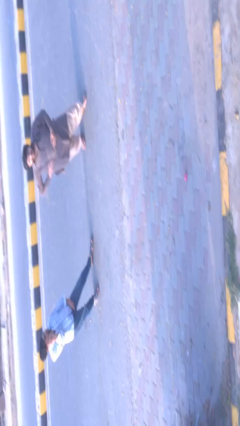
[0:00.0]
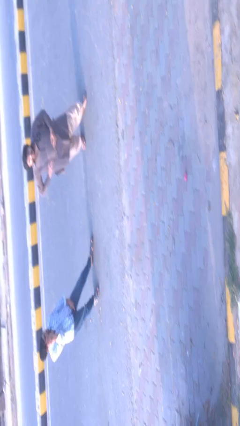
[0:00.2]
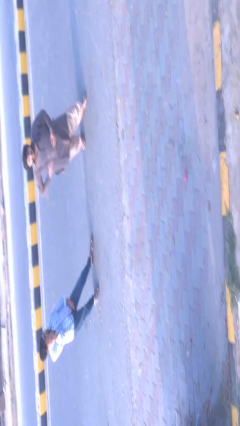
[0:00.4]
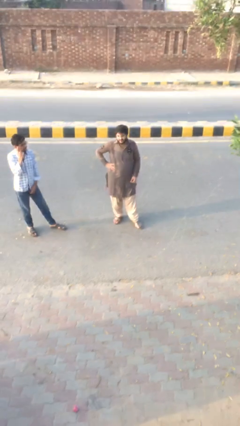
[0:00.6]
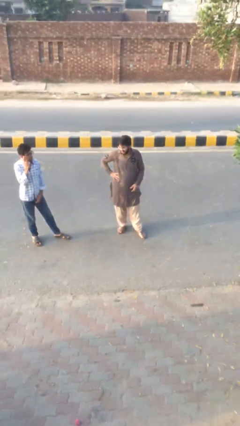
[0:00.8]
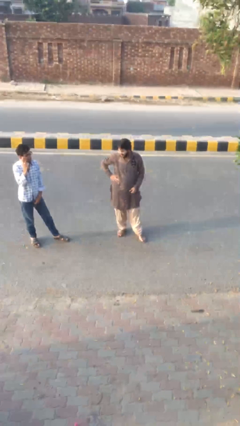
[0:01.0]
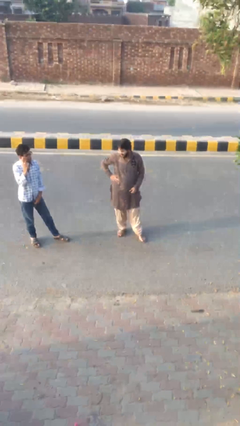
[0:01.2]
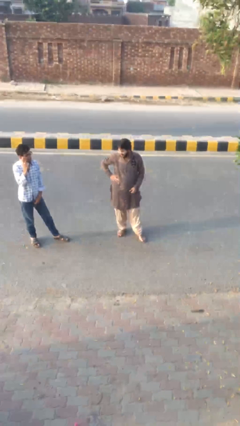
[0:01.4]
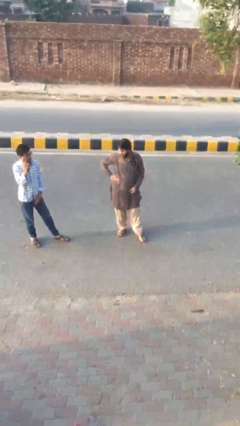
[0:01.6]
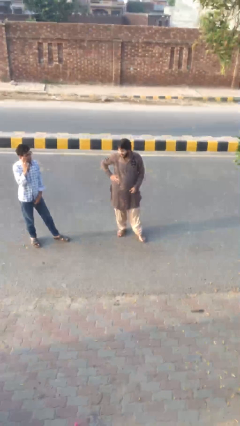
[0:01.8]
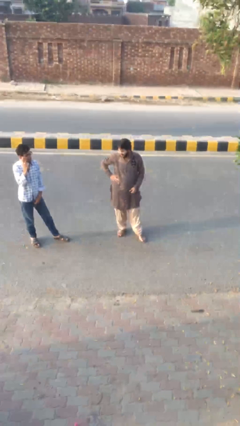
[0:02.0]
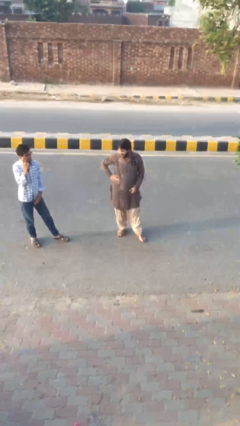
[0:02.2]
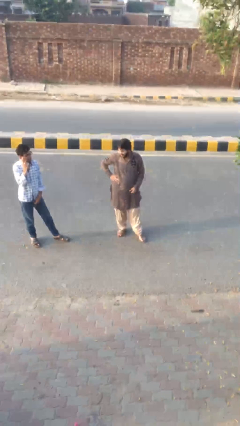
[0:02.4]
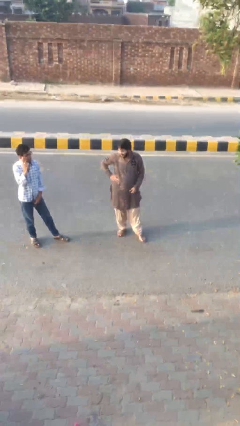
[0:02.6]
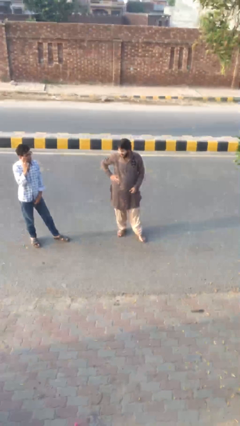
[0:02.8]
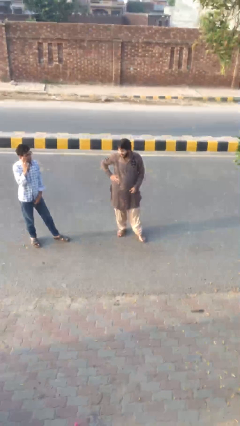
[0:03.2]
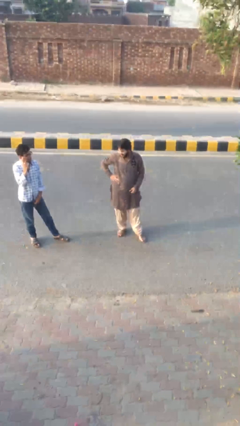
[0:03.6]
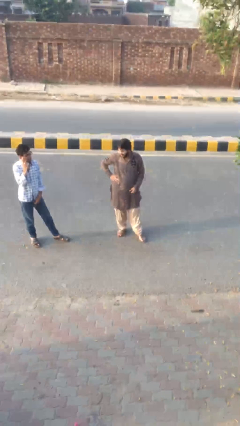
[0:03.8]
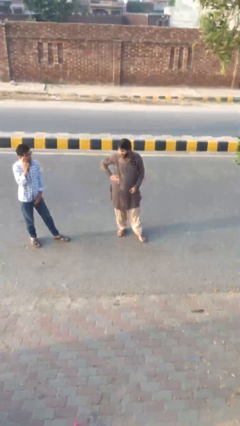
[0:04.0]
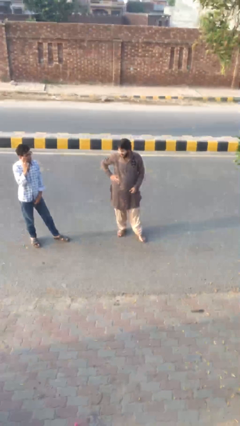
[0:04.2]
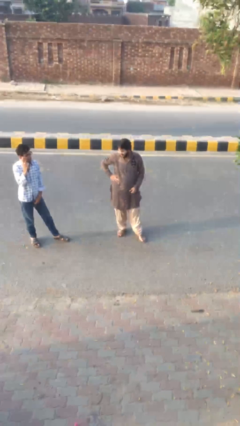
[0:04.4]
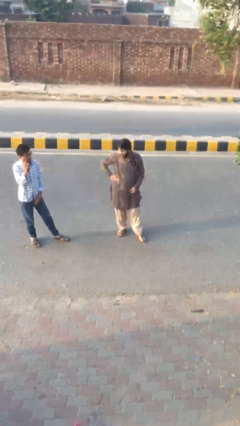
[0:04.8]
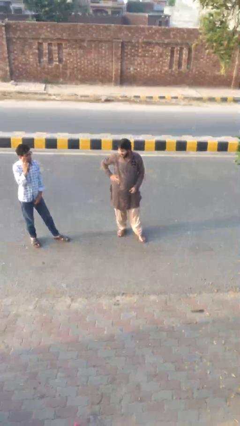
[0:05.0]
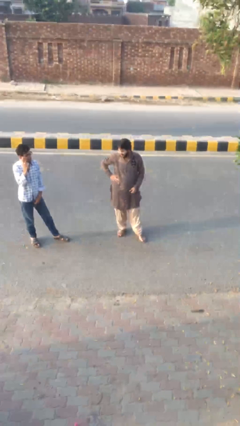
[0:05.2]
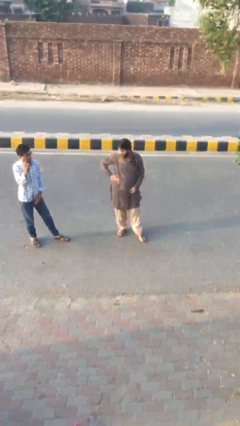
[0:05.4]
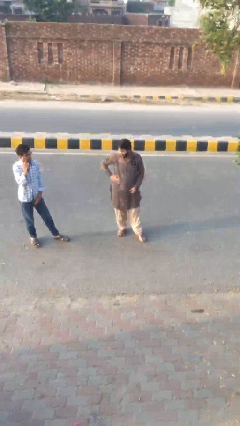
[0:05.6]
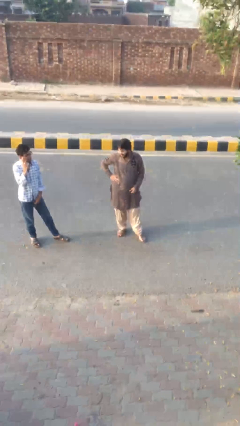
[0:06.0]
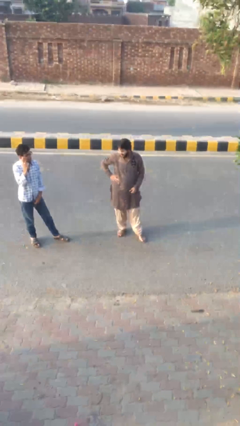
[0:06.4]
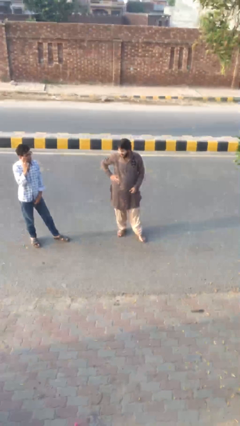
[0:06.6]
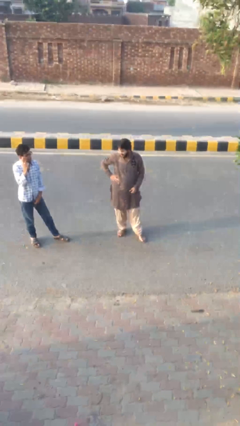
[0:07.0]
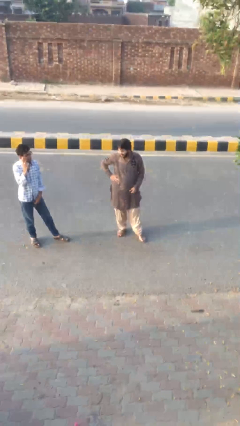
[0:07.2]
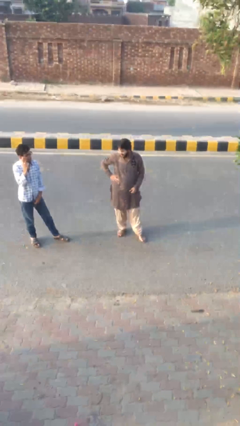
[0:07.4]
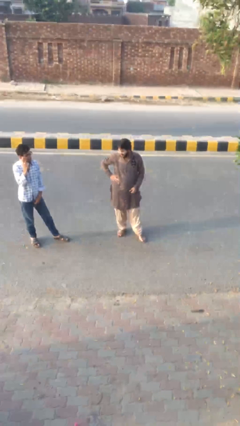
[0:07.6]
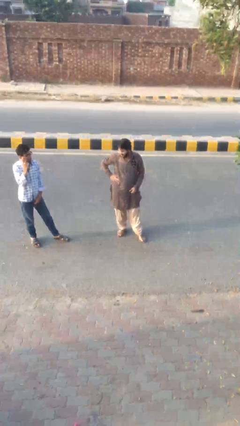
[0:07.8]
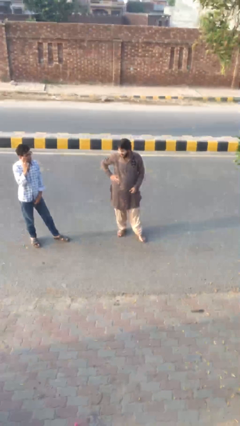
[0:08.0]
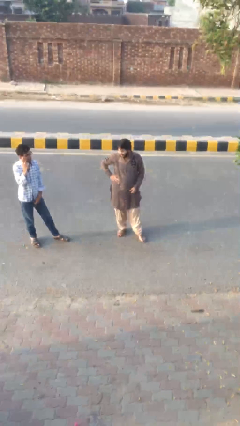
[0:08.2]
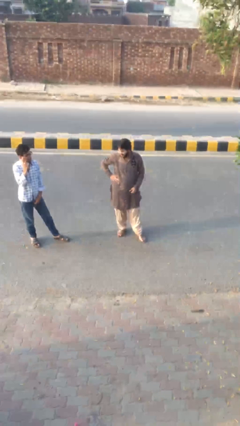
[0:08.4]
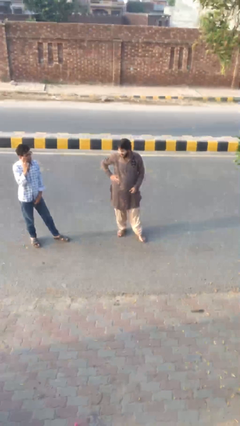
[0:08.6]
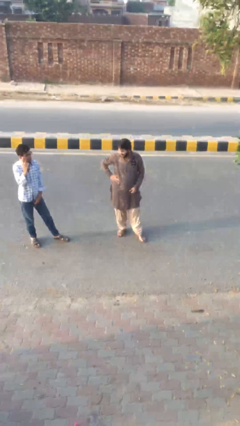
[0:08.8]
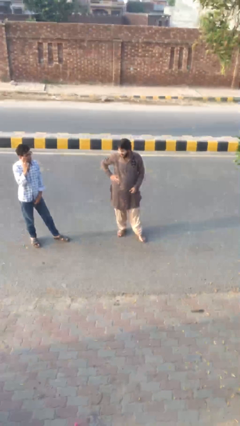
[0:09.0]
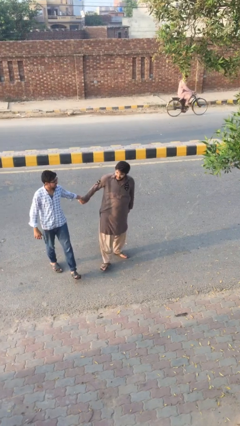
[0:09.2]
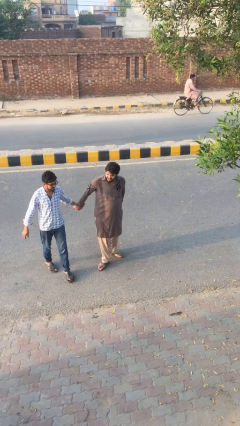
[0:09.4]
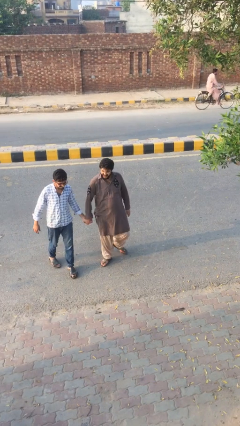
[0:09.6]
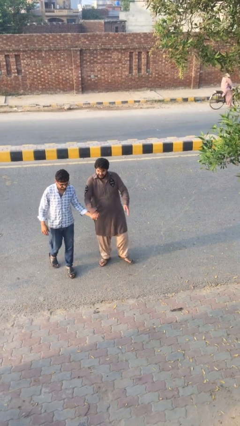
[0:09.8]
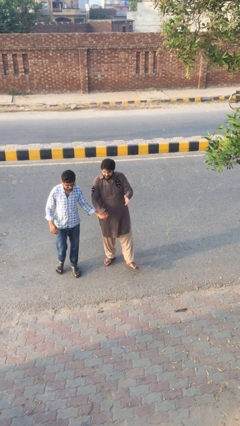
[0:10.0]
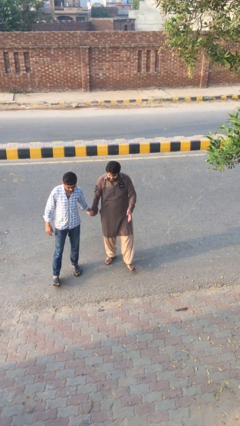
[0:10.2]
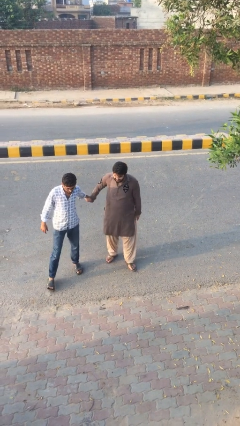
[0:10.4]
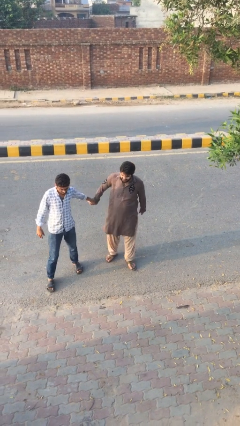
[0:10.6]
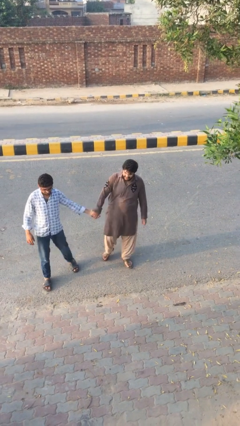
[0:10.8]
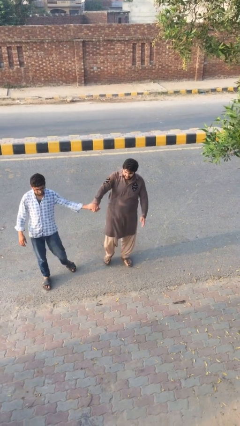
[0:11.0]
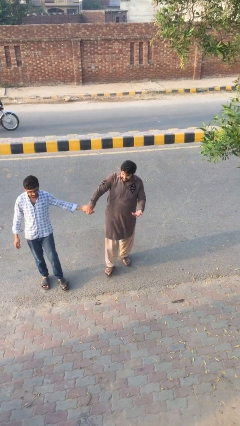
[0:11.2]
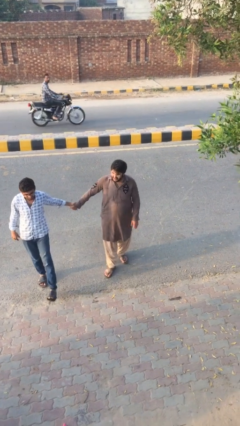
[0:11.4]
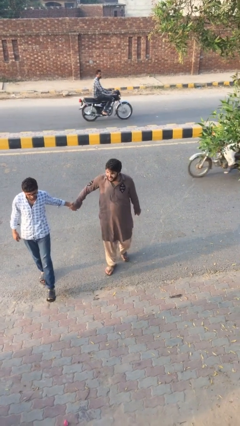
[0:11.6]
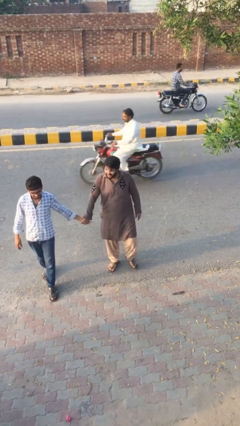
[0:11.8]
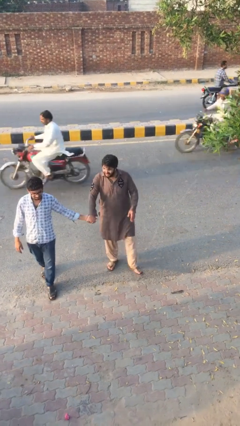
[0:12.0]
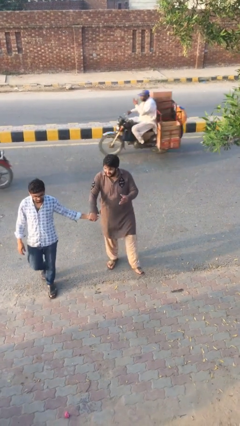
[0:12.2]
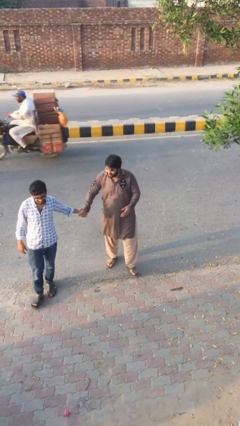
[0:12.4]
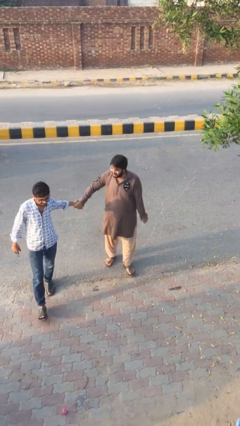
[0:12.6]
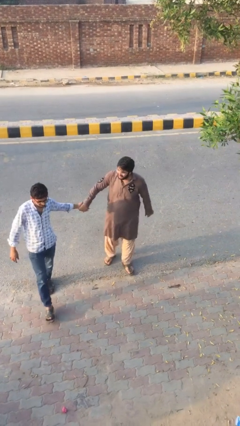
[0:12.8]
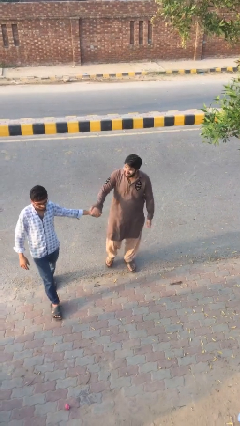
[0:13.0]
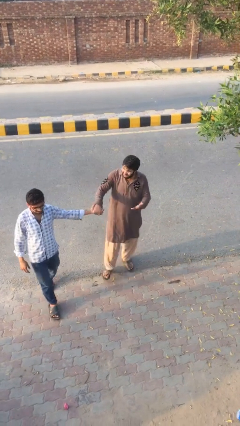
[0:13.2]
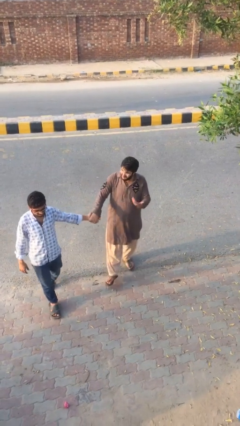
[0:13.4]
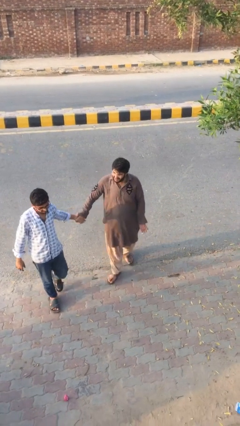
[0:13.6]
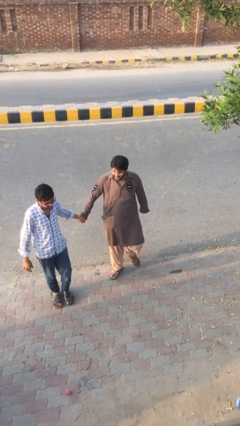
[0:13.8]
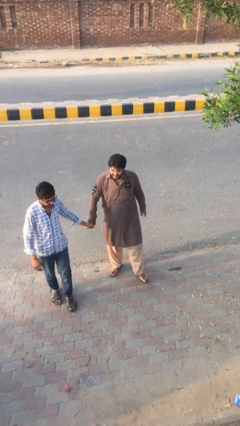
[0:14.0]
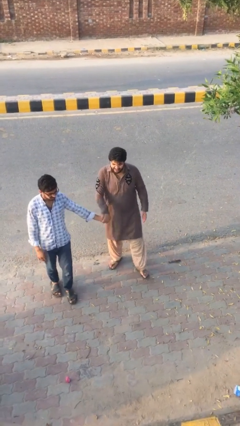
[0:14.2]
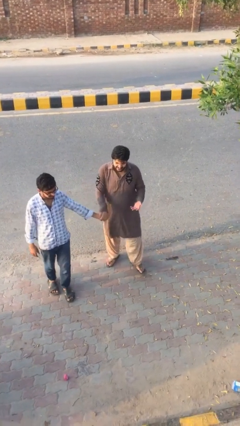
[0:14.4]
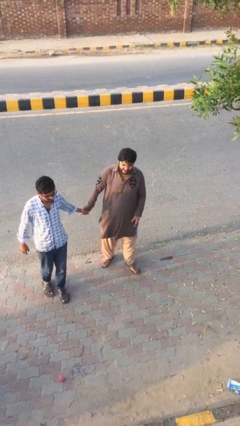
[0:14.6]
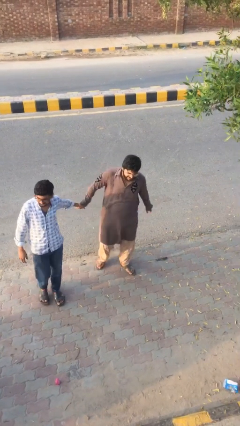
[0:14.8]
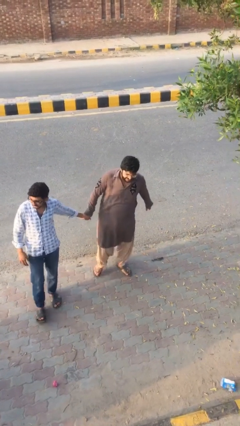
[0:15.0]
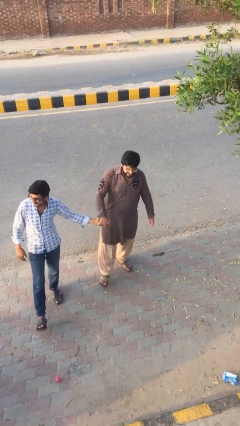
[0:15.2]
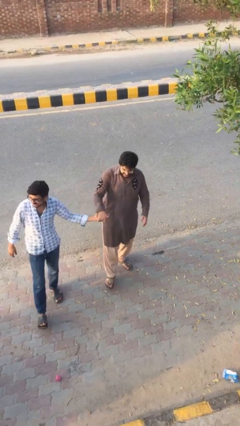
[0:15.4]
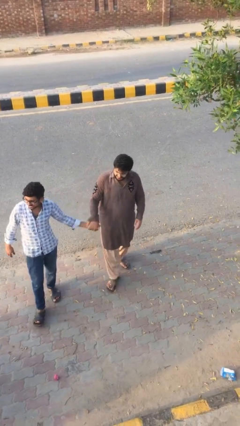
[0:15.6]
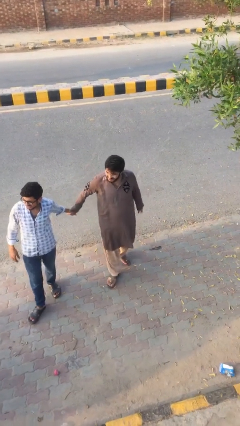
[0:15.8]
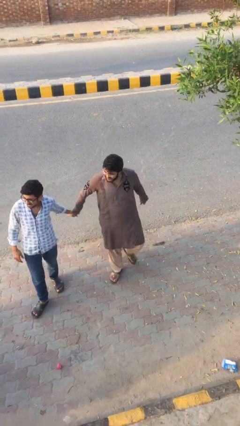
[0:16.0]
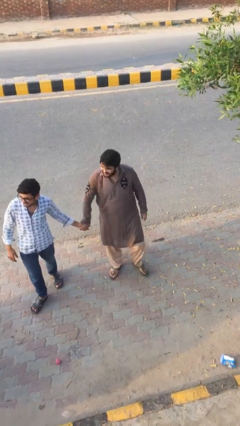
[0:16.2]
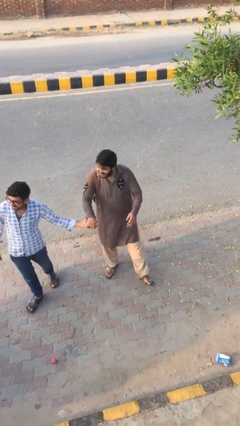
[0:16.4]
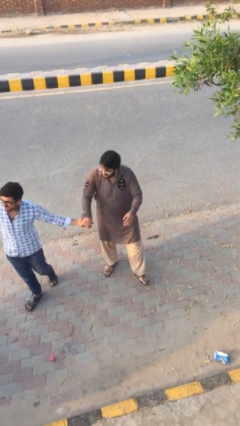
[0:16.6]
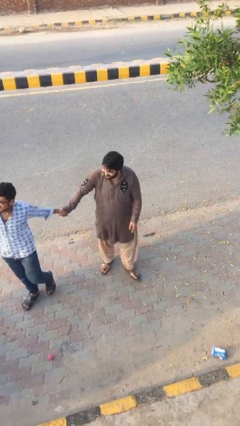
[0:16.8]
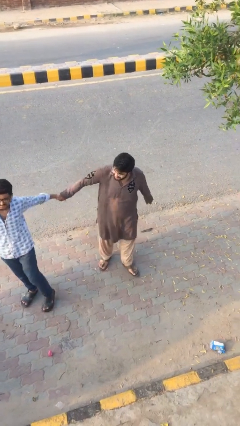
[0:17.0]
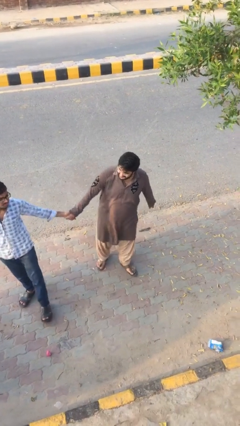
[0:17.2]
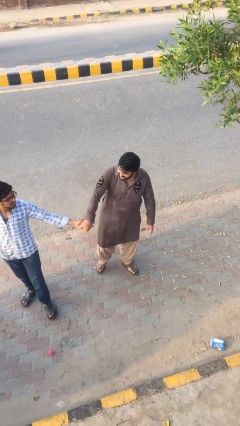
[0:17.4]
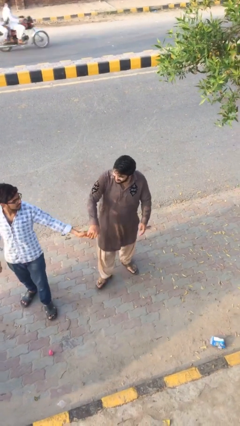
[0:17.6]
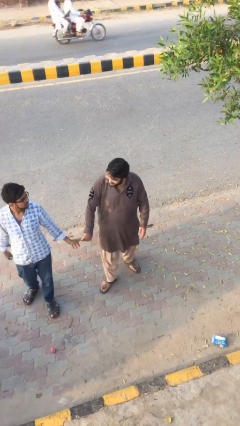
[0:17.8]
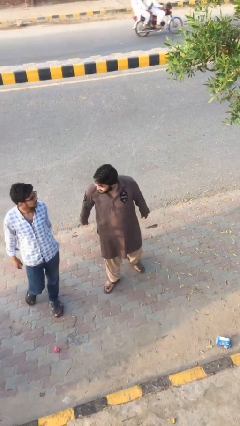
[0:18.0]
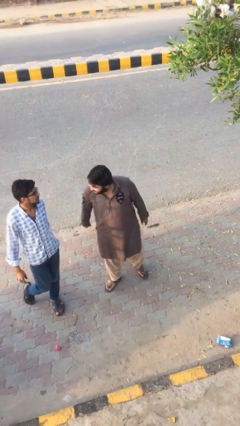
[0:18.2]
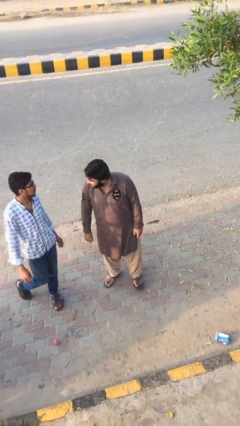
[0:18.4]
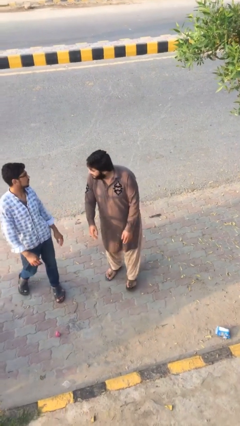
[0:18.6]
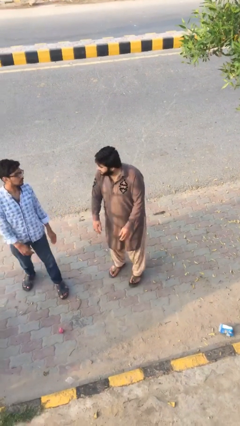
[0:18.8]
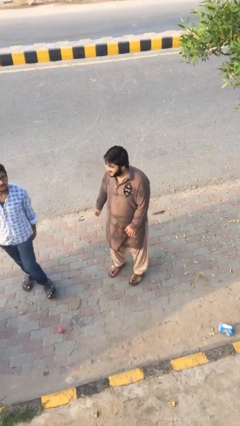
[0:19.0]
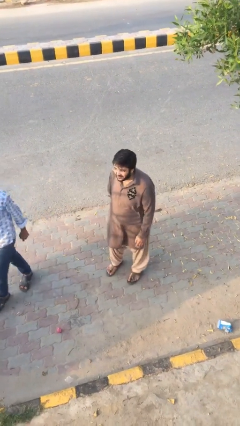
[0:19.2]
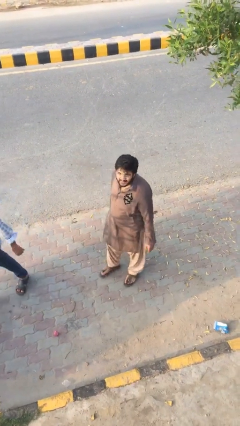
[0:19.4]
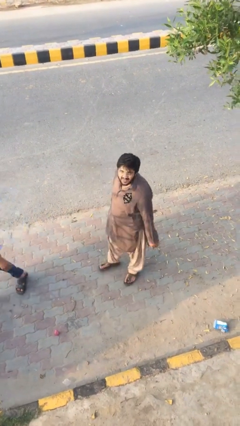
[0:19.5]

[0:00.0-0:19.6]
person holds hand
